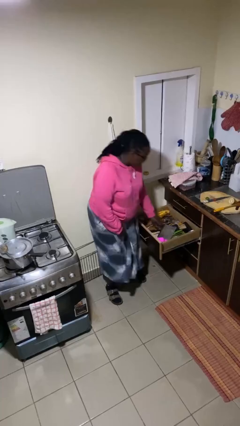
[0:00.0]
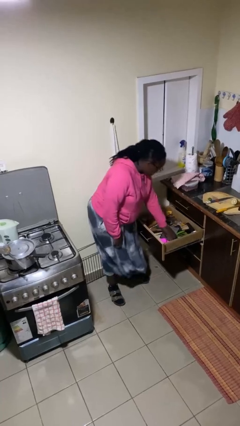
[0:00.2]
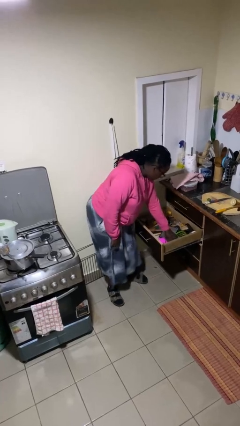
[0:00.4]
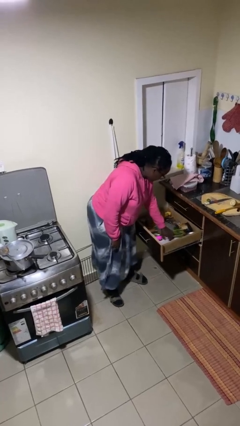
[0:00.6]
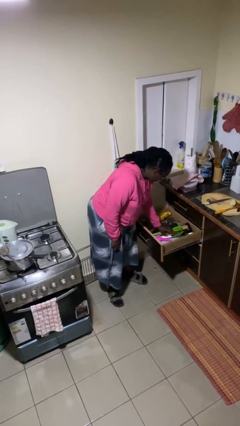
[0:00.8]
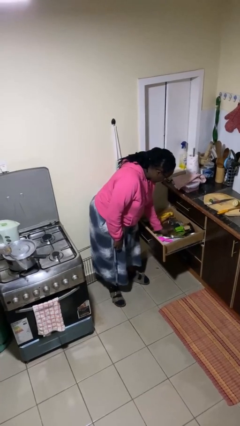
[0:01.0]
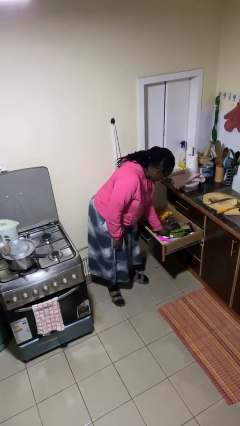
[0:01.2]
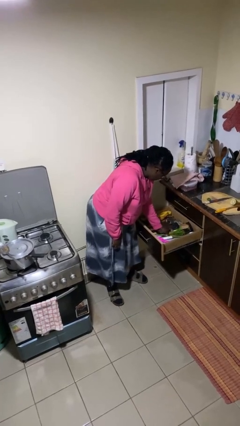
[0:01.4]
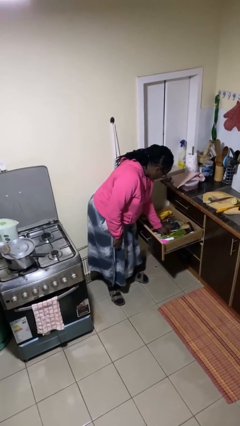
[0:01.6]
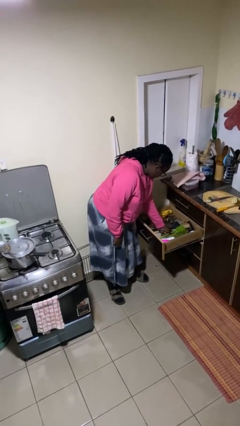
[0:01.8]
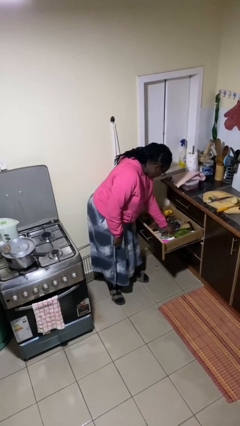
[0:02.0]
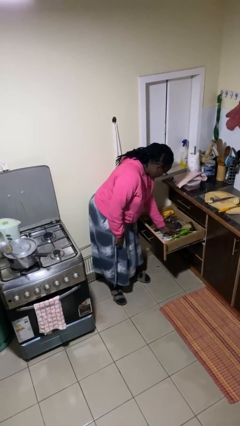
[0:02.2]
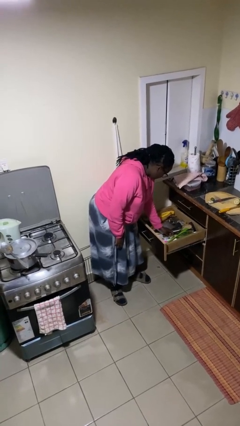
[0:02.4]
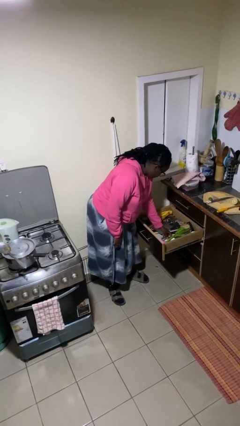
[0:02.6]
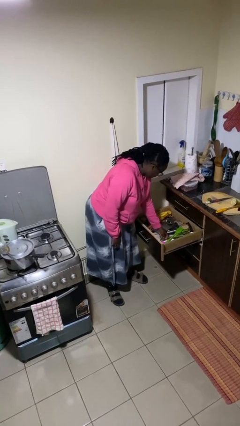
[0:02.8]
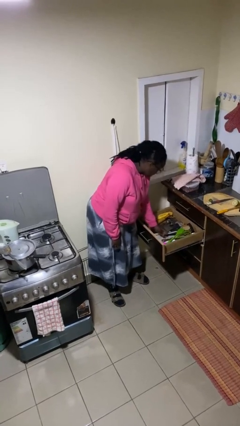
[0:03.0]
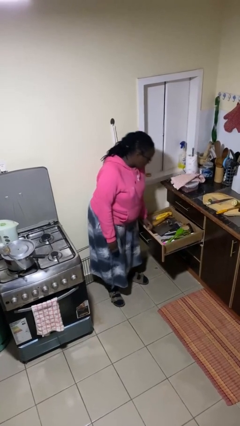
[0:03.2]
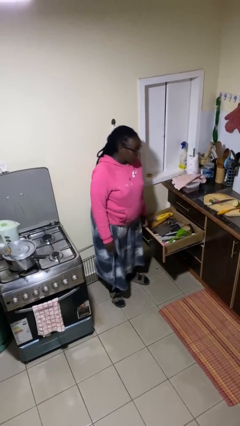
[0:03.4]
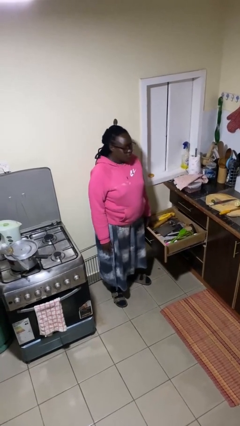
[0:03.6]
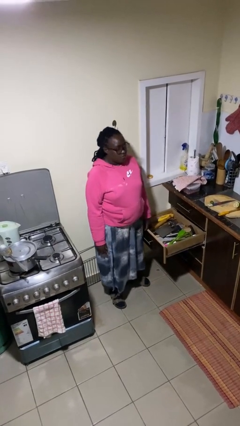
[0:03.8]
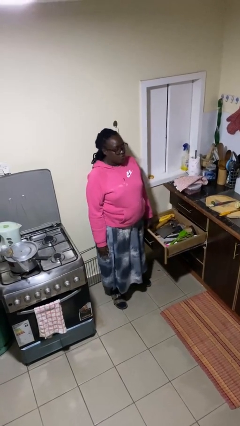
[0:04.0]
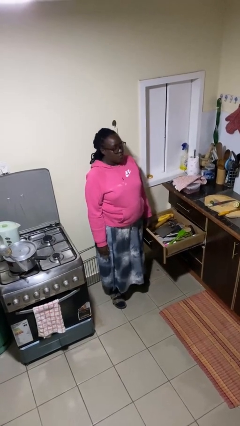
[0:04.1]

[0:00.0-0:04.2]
person searches in kitchen drawer

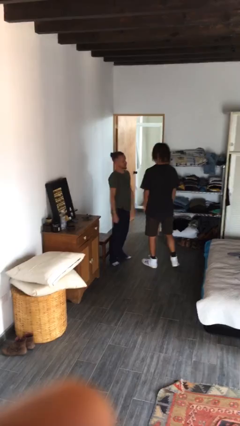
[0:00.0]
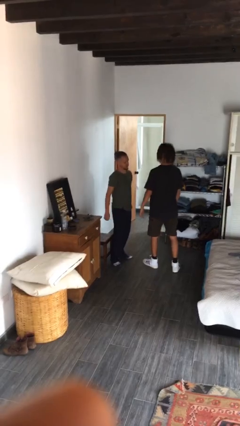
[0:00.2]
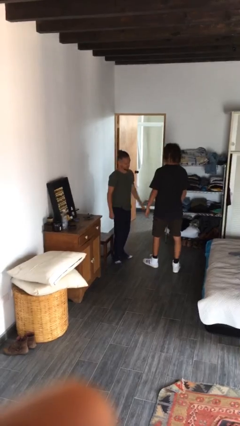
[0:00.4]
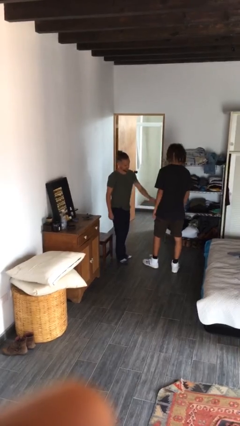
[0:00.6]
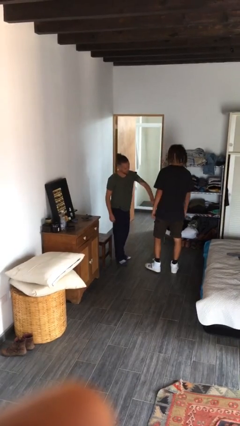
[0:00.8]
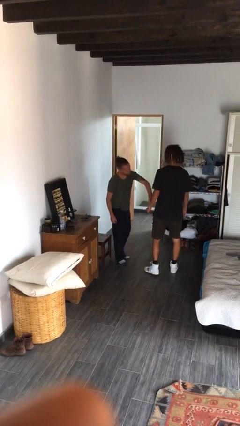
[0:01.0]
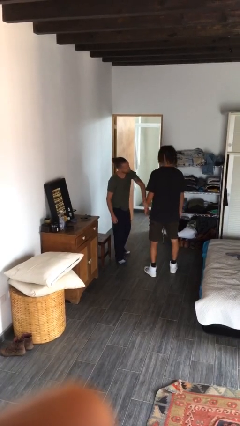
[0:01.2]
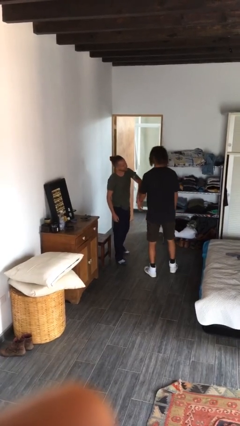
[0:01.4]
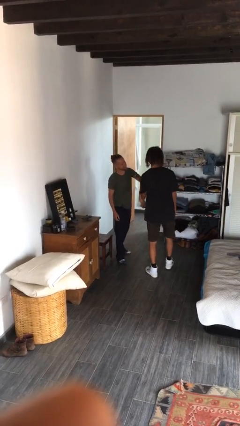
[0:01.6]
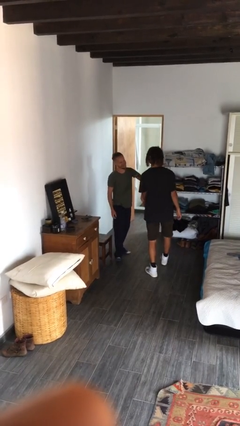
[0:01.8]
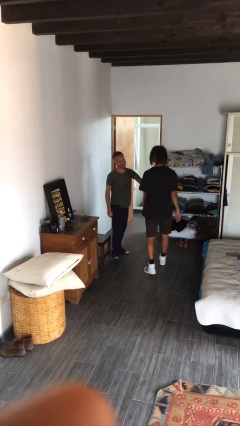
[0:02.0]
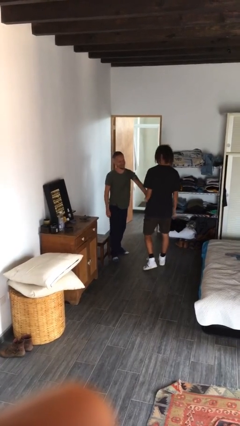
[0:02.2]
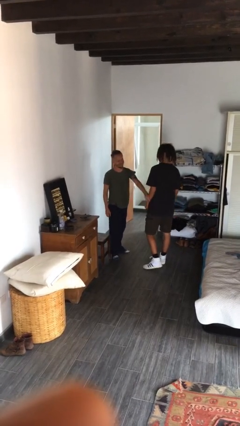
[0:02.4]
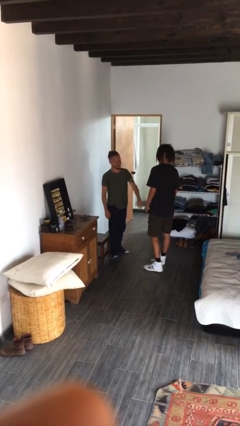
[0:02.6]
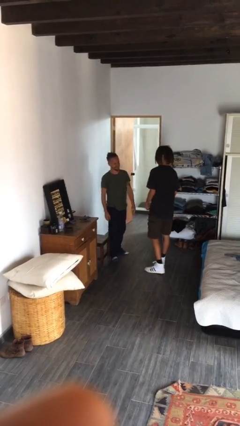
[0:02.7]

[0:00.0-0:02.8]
person grabs person by forearm

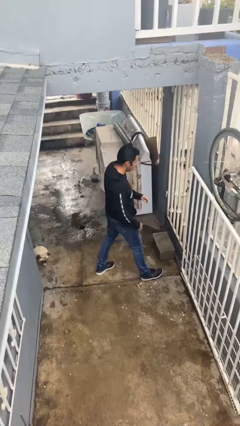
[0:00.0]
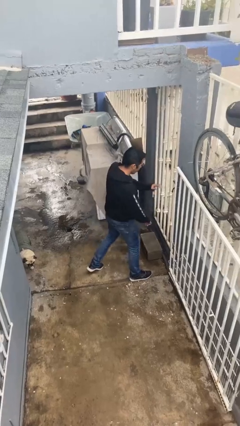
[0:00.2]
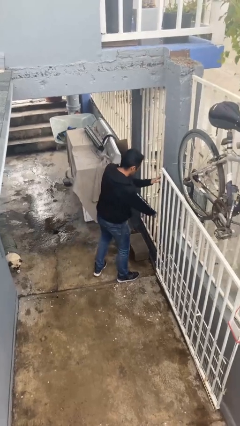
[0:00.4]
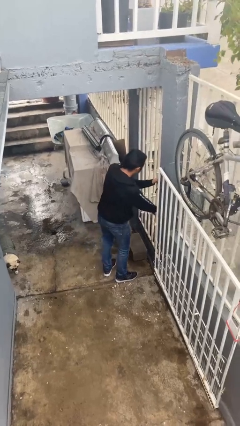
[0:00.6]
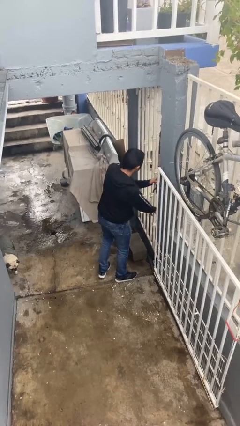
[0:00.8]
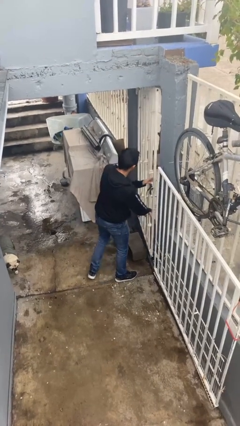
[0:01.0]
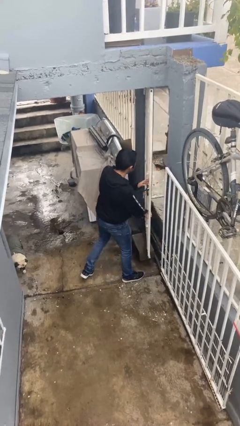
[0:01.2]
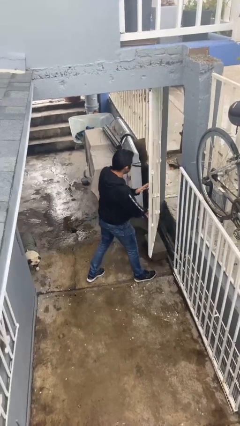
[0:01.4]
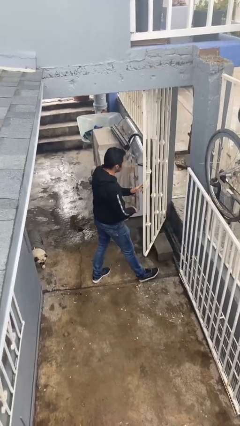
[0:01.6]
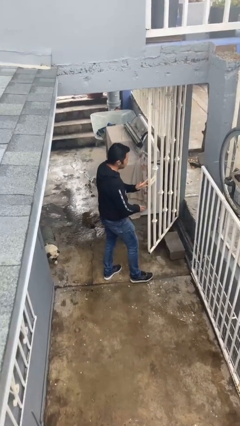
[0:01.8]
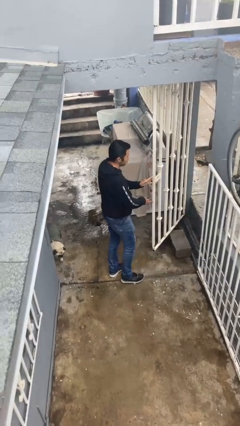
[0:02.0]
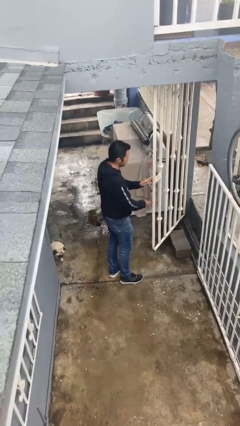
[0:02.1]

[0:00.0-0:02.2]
person opens facility door

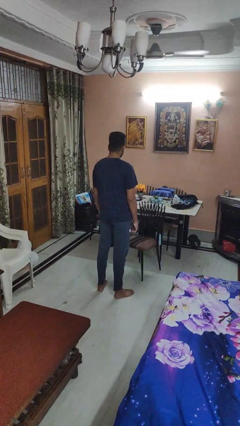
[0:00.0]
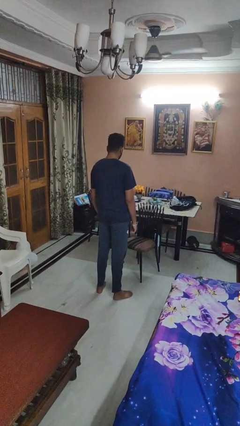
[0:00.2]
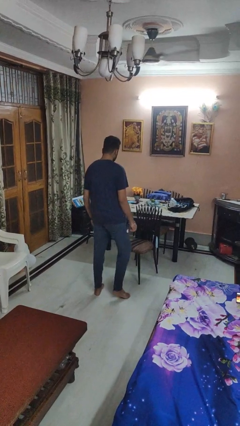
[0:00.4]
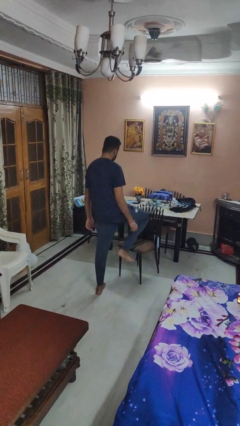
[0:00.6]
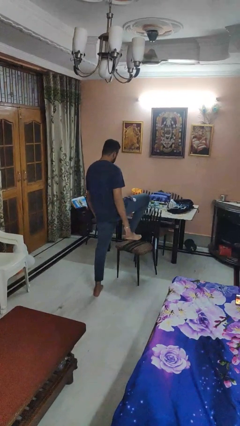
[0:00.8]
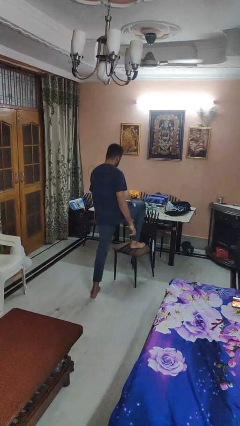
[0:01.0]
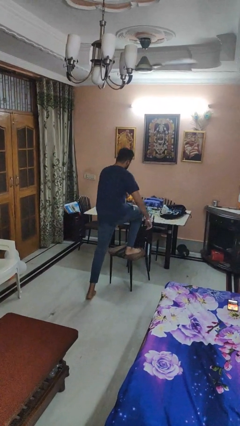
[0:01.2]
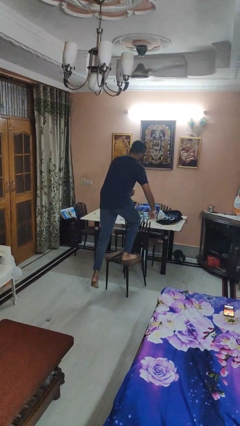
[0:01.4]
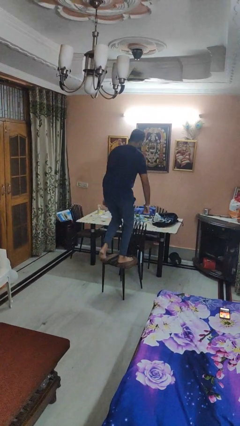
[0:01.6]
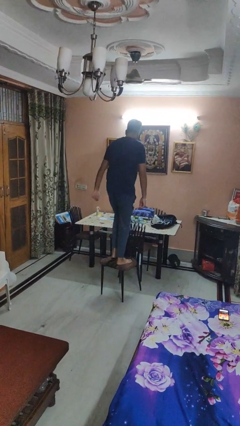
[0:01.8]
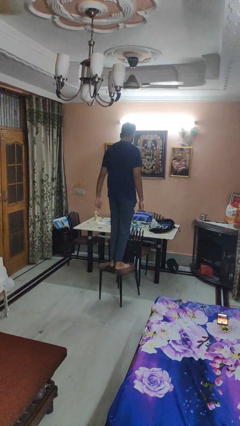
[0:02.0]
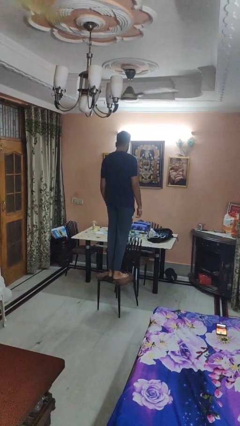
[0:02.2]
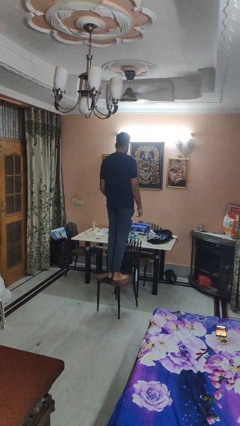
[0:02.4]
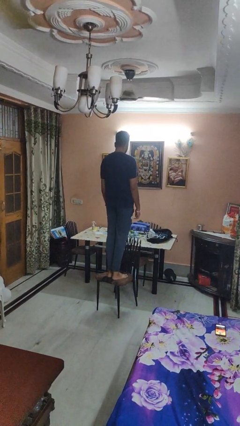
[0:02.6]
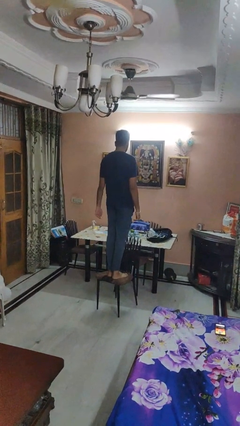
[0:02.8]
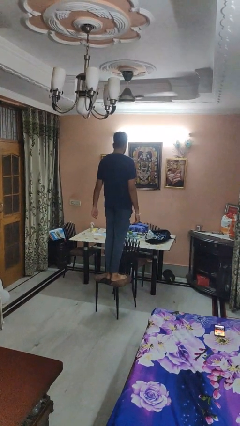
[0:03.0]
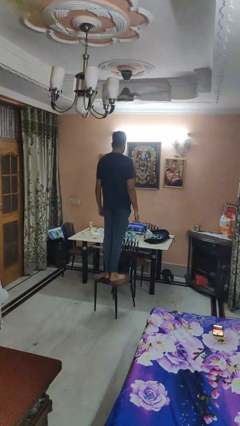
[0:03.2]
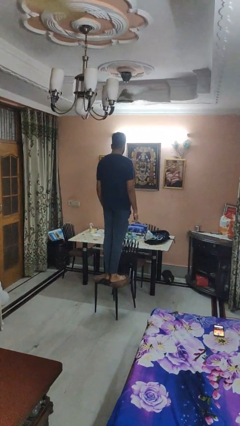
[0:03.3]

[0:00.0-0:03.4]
person climbs on chair

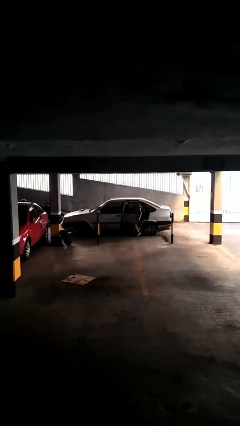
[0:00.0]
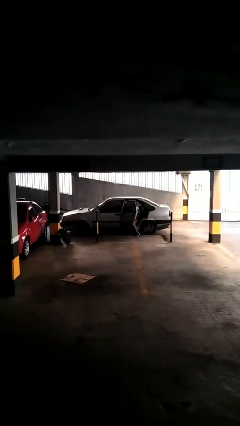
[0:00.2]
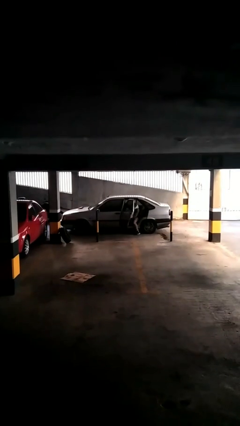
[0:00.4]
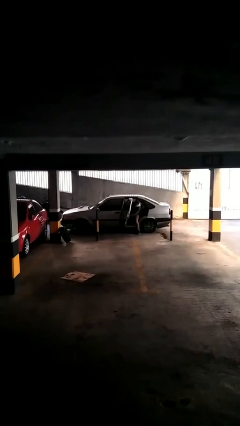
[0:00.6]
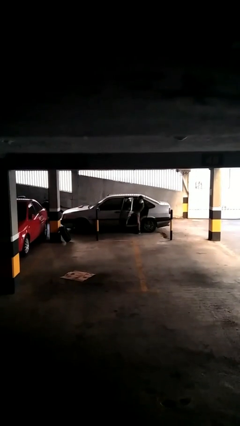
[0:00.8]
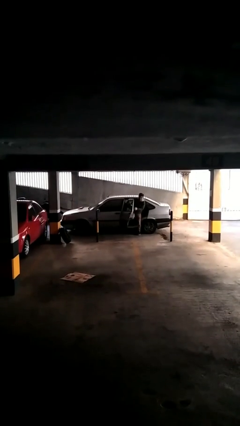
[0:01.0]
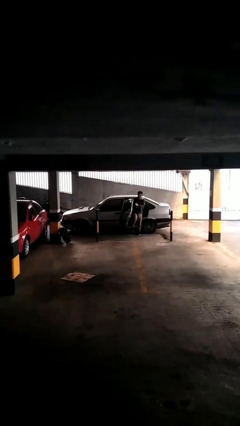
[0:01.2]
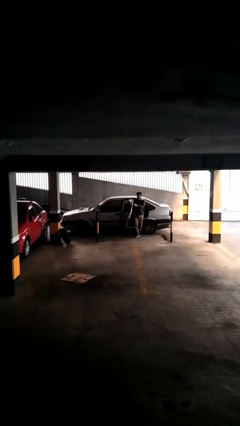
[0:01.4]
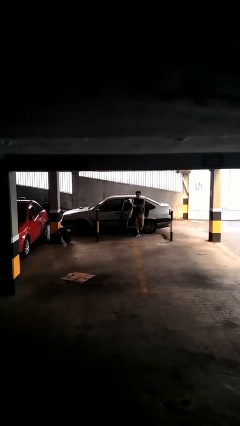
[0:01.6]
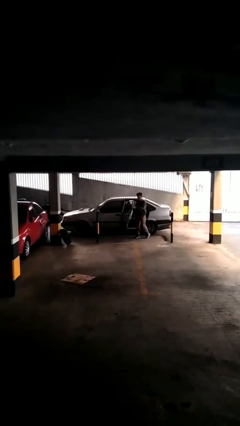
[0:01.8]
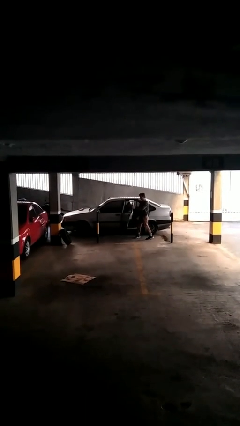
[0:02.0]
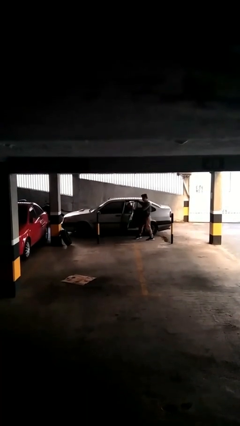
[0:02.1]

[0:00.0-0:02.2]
car drops off person

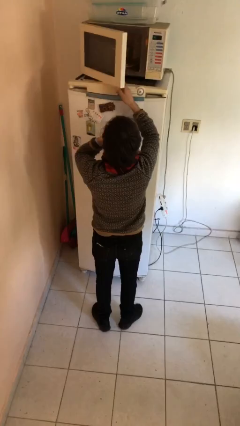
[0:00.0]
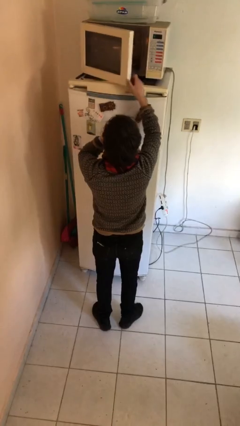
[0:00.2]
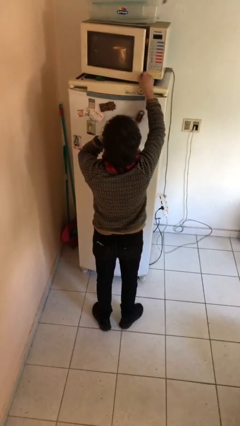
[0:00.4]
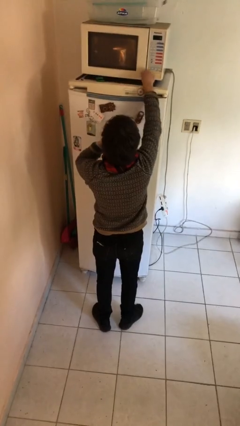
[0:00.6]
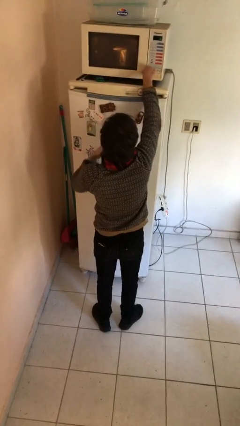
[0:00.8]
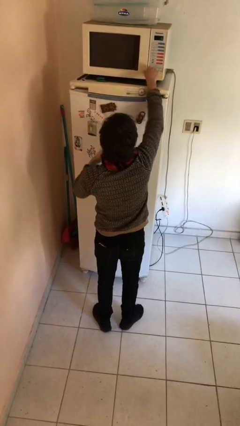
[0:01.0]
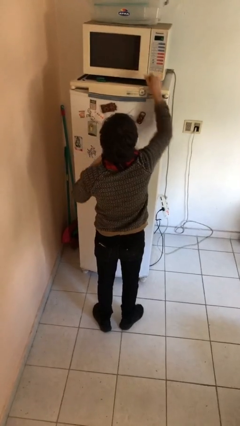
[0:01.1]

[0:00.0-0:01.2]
person closes microwave

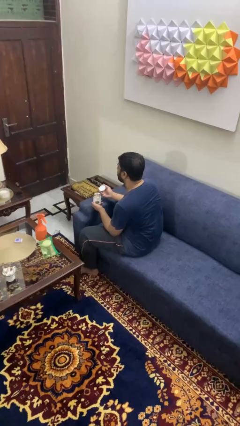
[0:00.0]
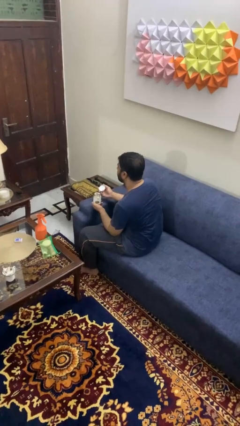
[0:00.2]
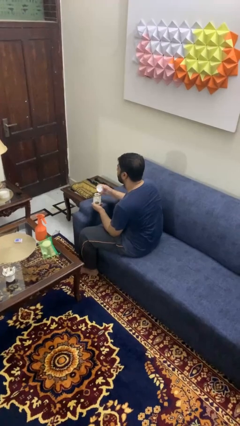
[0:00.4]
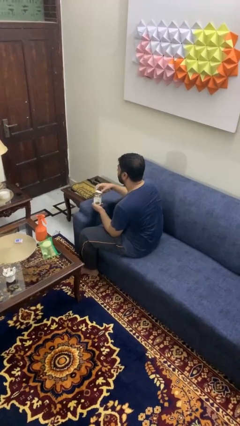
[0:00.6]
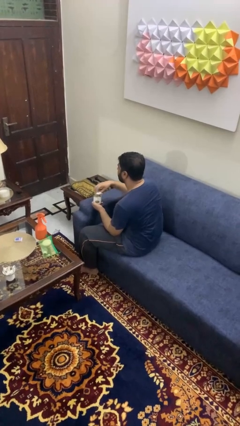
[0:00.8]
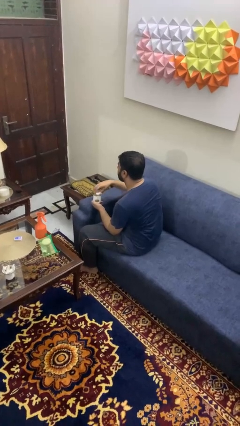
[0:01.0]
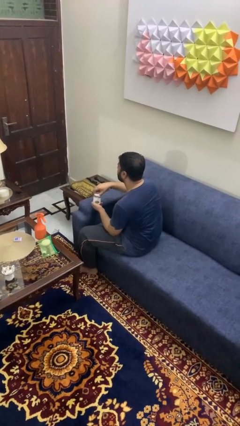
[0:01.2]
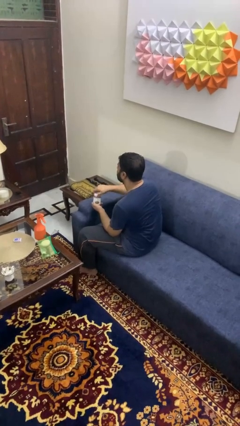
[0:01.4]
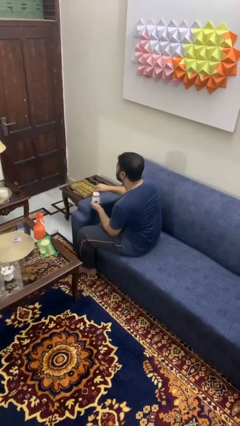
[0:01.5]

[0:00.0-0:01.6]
person closes jar
